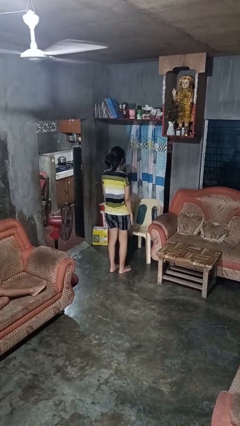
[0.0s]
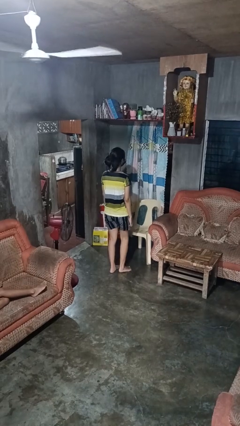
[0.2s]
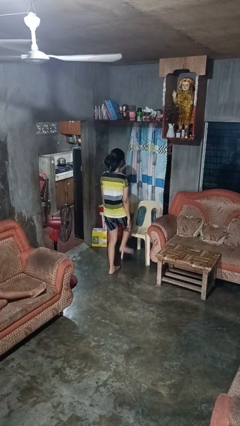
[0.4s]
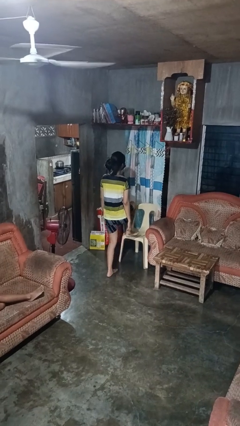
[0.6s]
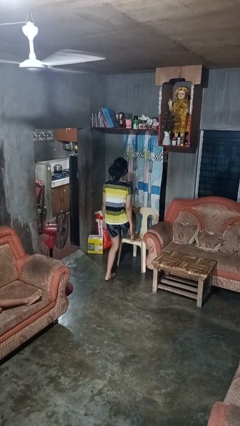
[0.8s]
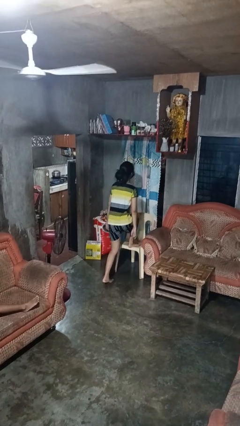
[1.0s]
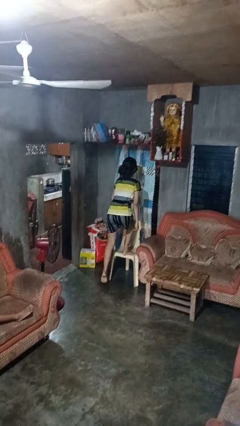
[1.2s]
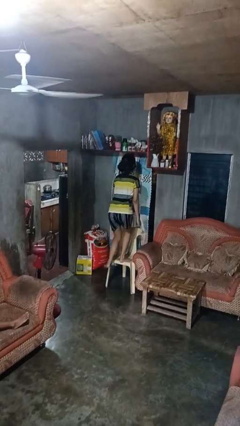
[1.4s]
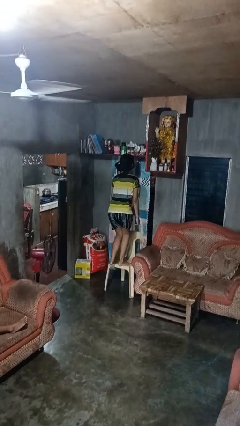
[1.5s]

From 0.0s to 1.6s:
person climbs on chair

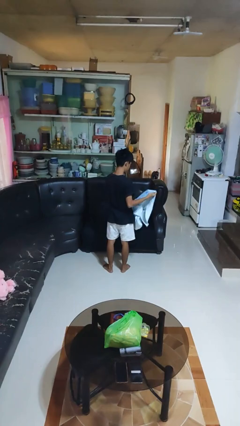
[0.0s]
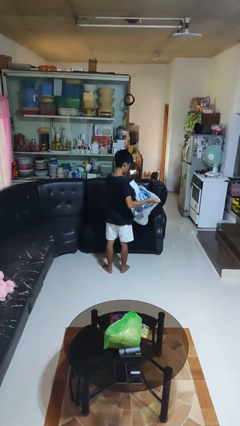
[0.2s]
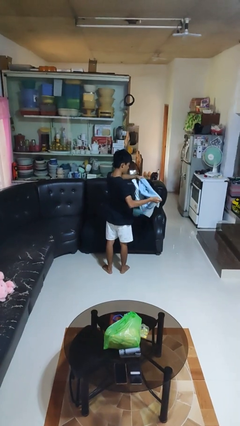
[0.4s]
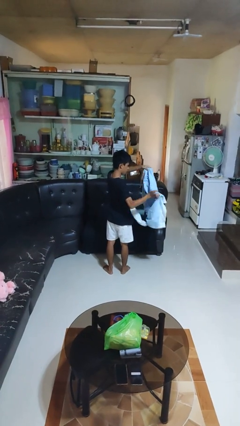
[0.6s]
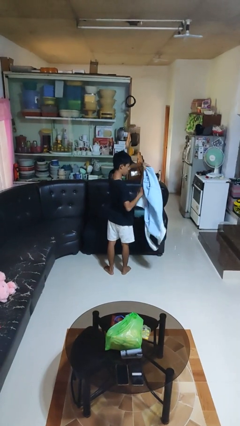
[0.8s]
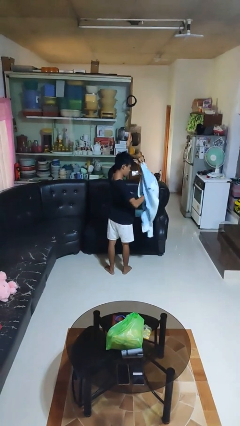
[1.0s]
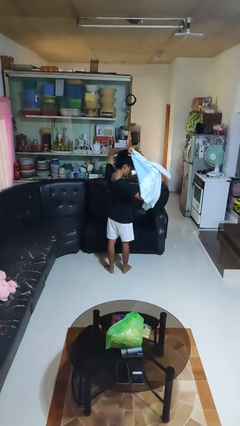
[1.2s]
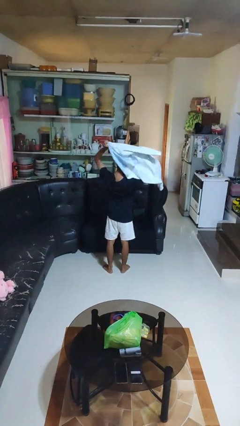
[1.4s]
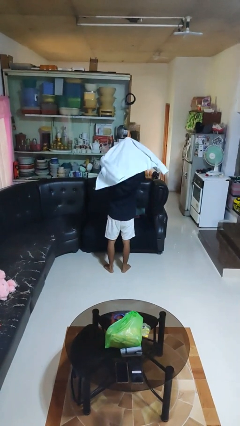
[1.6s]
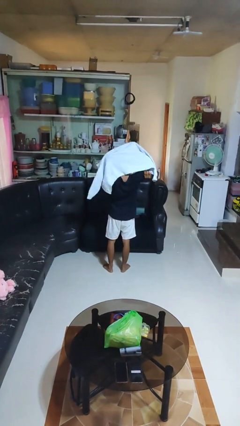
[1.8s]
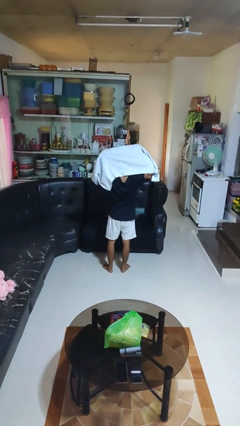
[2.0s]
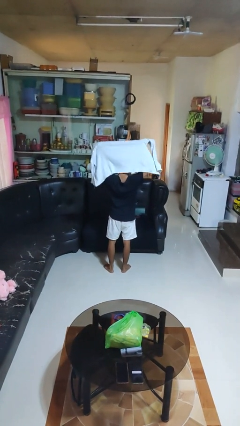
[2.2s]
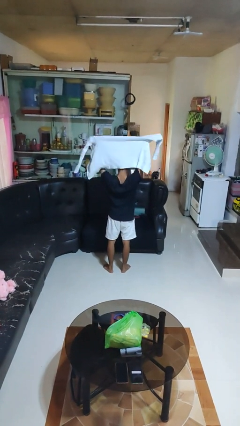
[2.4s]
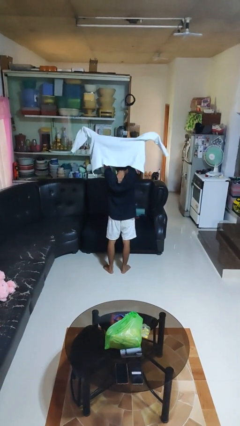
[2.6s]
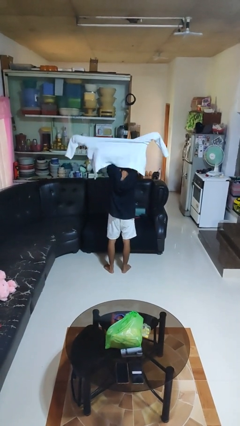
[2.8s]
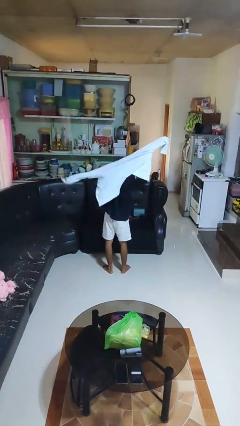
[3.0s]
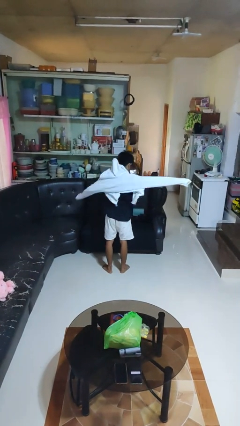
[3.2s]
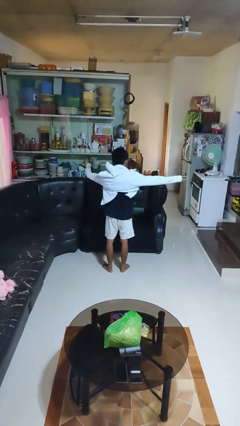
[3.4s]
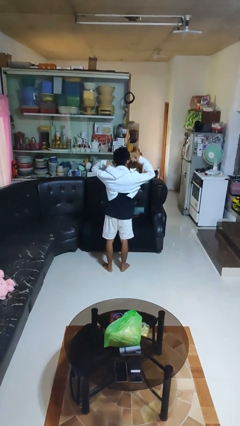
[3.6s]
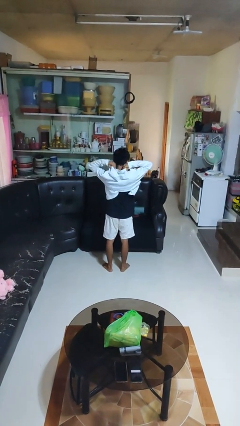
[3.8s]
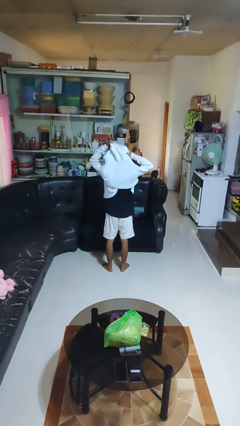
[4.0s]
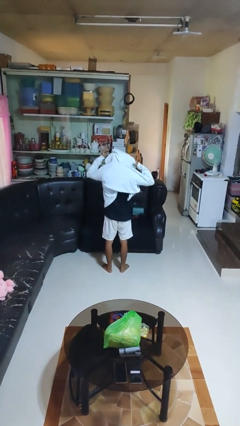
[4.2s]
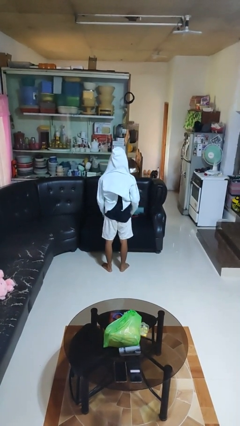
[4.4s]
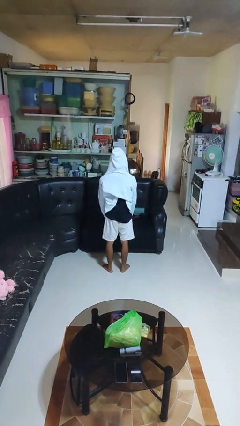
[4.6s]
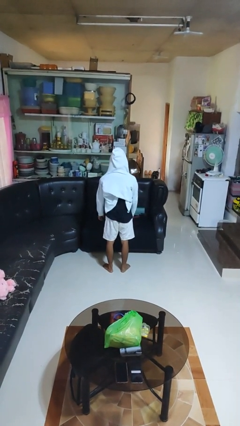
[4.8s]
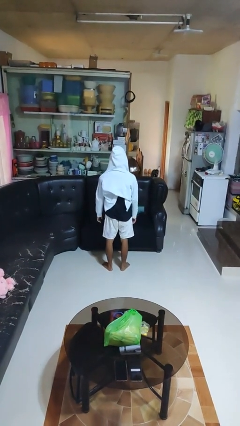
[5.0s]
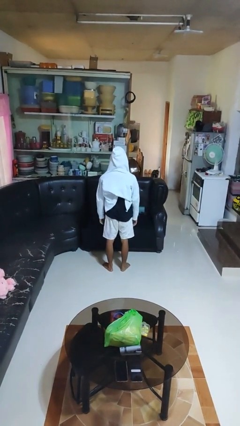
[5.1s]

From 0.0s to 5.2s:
person puts on hoodie

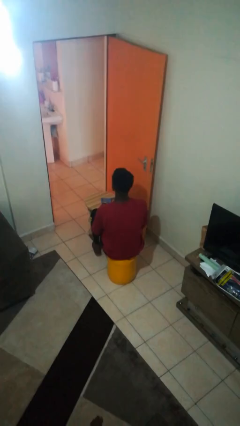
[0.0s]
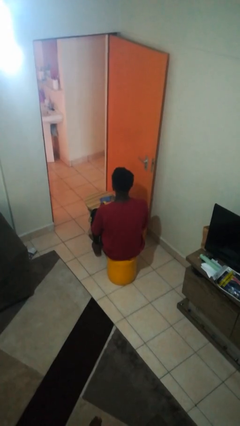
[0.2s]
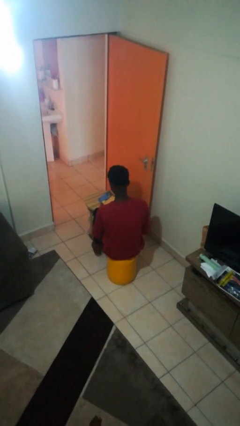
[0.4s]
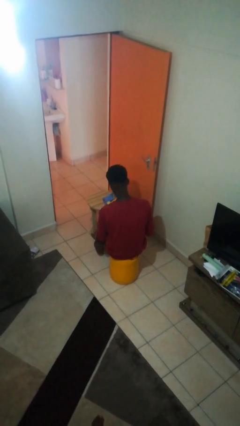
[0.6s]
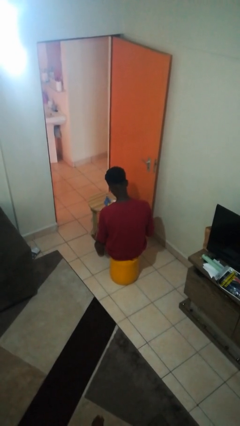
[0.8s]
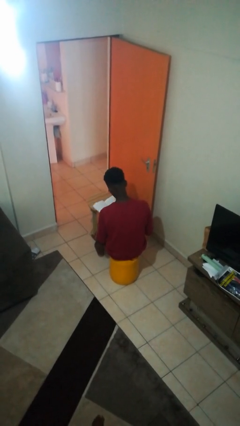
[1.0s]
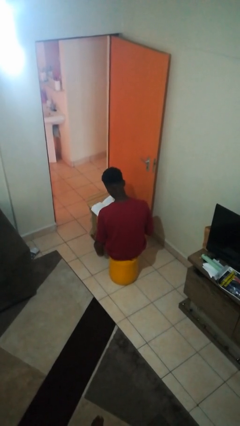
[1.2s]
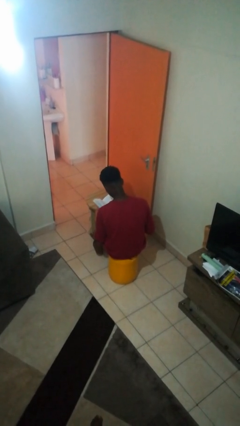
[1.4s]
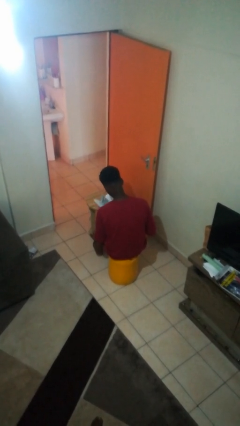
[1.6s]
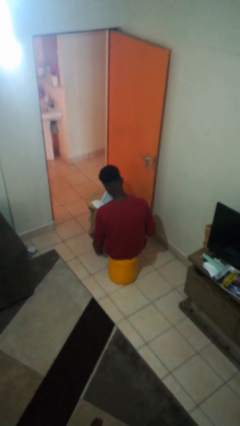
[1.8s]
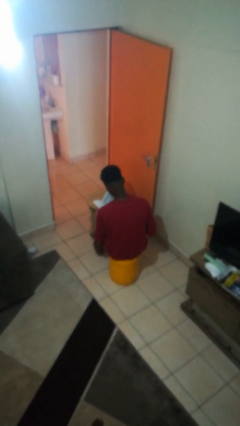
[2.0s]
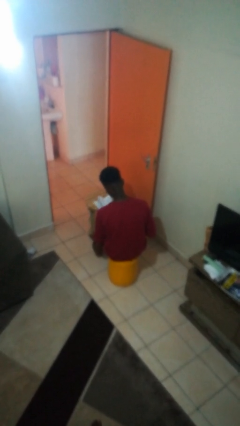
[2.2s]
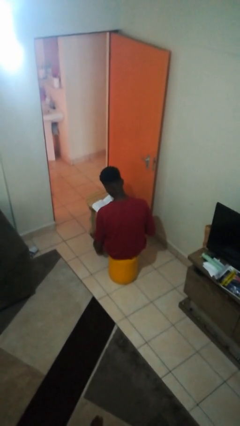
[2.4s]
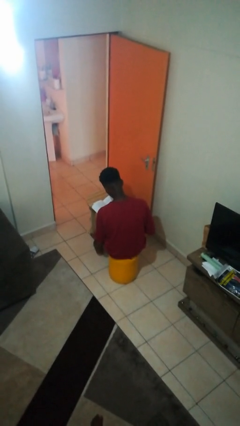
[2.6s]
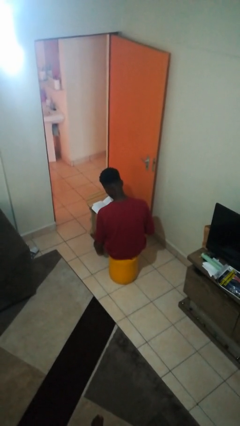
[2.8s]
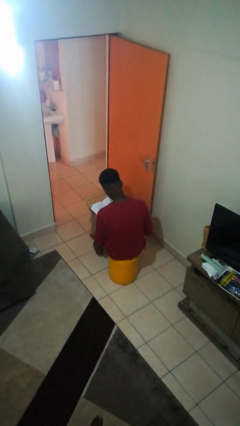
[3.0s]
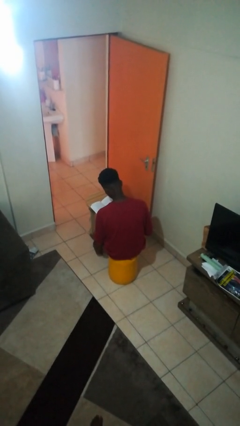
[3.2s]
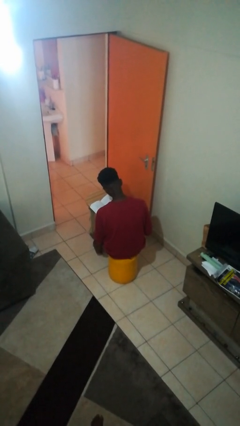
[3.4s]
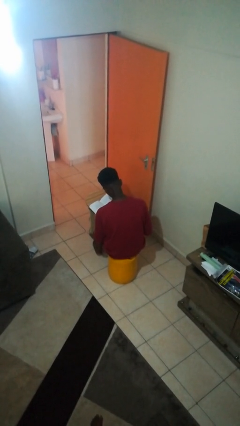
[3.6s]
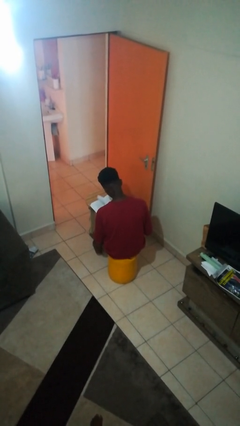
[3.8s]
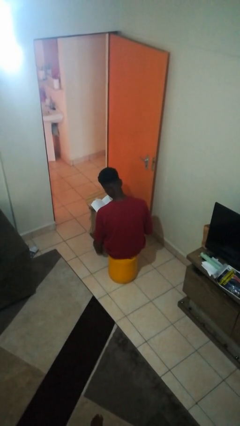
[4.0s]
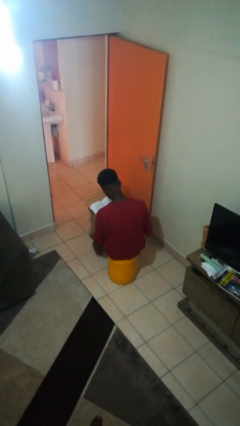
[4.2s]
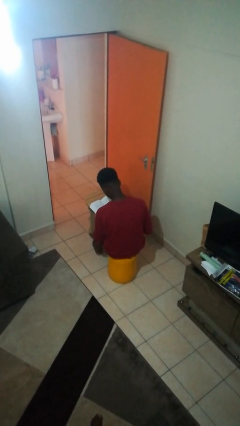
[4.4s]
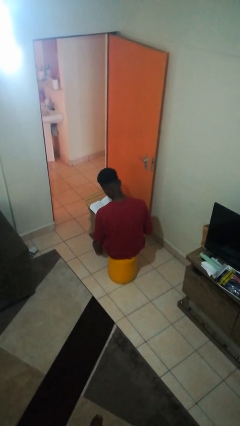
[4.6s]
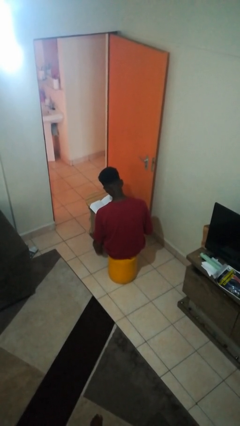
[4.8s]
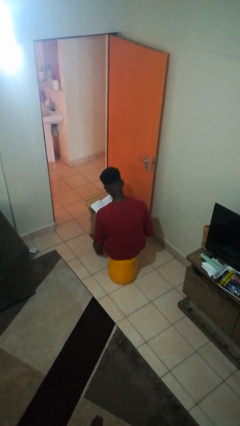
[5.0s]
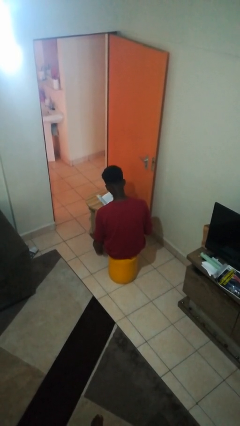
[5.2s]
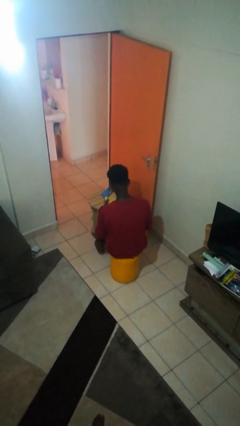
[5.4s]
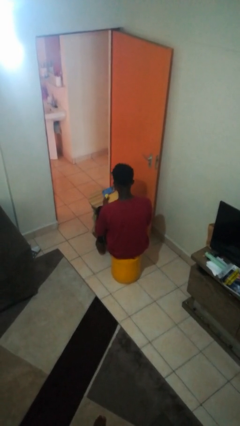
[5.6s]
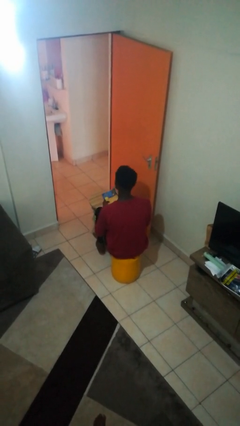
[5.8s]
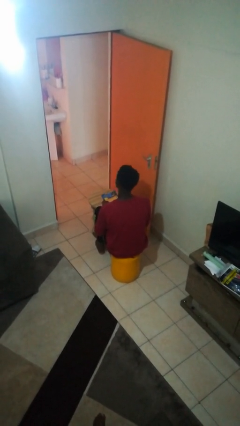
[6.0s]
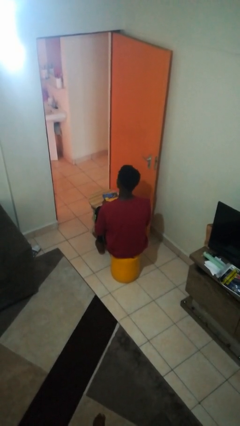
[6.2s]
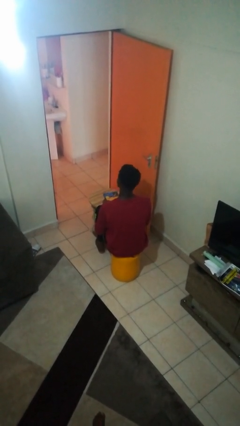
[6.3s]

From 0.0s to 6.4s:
person reads book

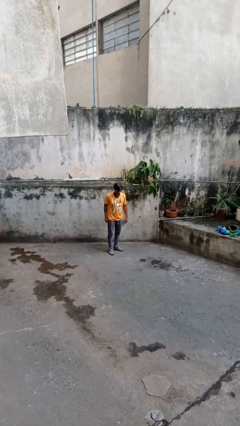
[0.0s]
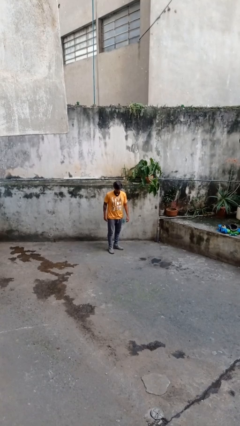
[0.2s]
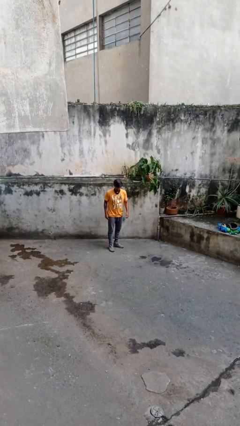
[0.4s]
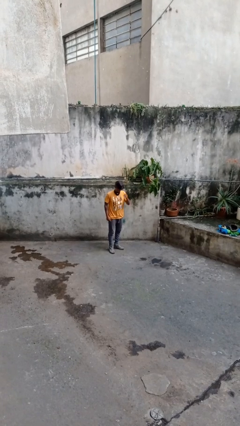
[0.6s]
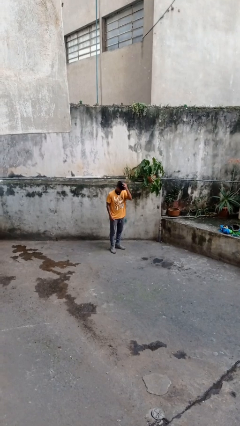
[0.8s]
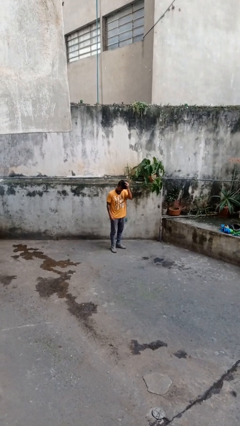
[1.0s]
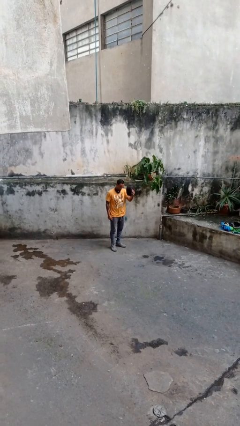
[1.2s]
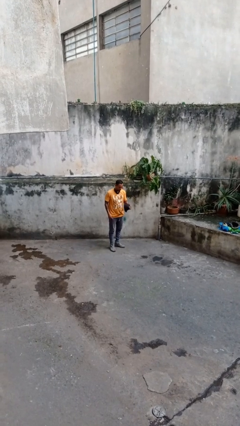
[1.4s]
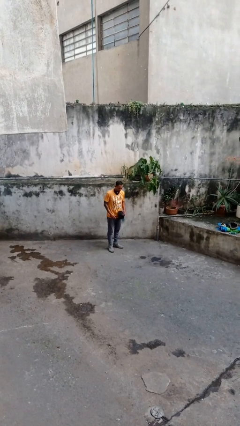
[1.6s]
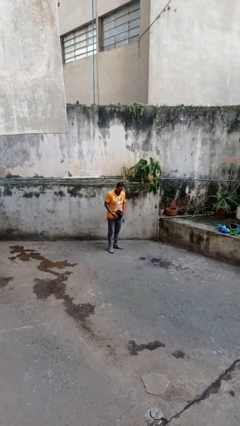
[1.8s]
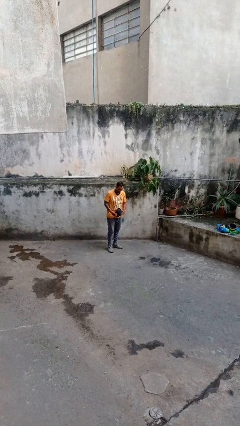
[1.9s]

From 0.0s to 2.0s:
person takes off hat

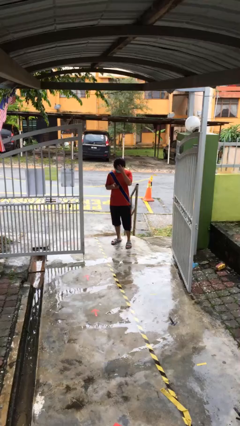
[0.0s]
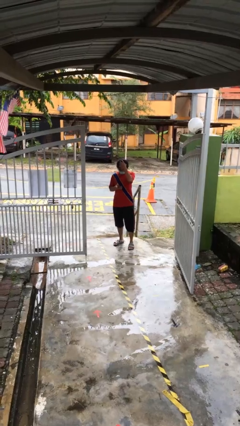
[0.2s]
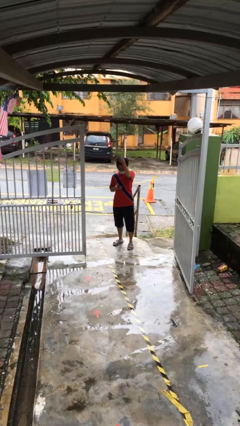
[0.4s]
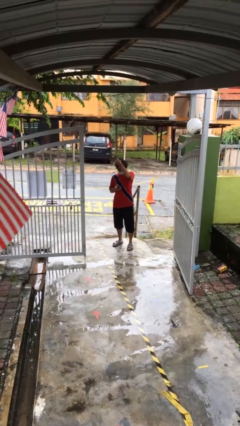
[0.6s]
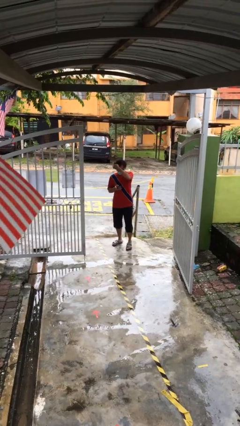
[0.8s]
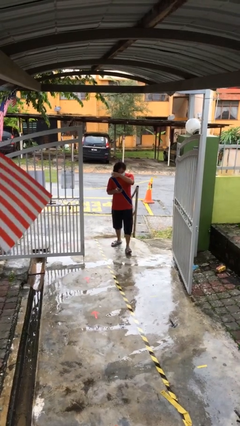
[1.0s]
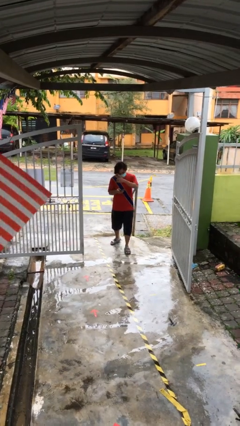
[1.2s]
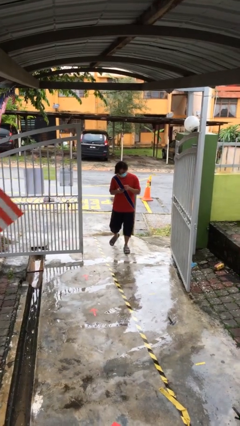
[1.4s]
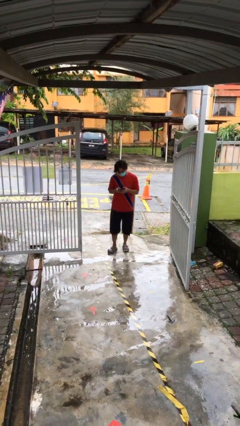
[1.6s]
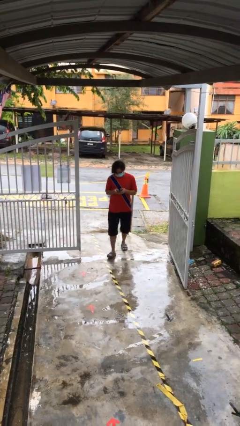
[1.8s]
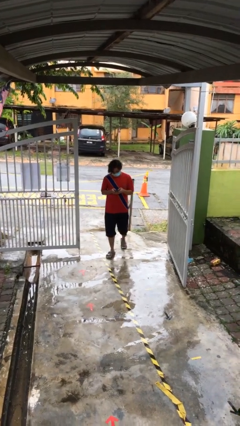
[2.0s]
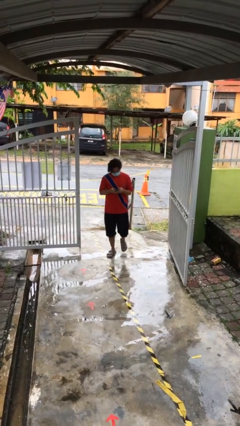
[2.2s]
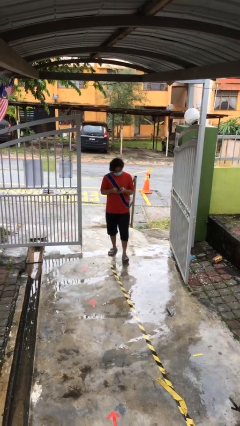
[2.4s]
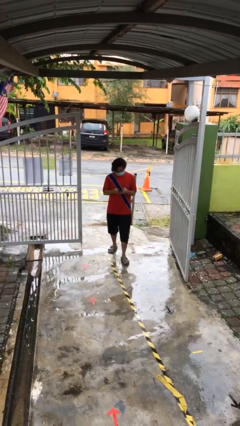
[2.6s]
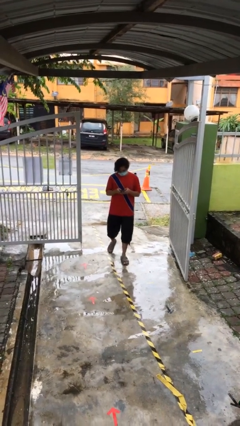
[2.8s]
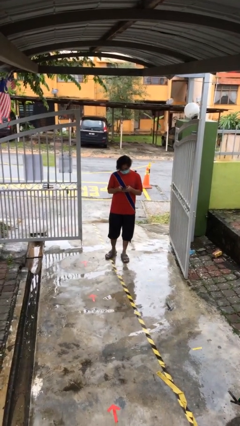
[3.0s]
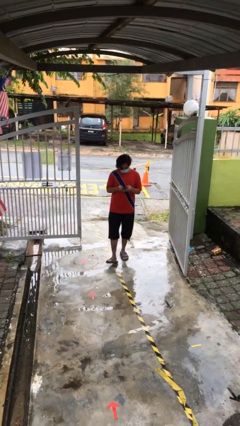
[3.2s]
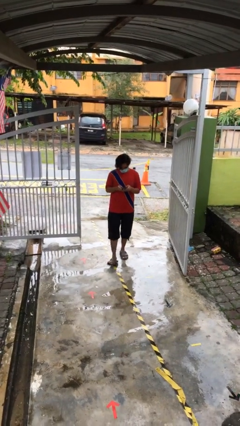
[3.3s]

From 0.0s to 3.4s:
person enters scene through structure
